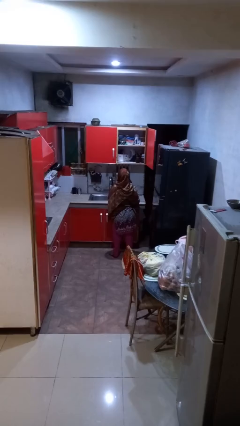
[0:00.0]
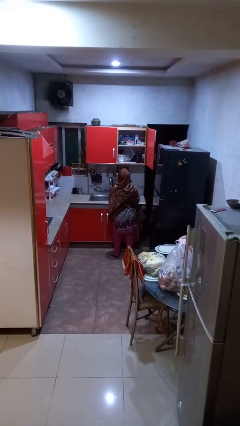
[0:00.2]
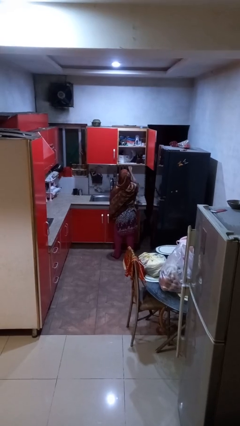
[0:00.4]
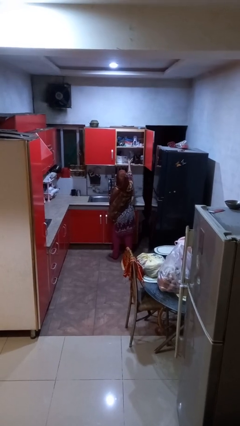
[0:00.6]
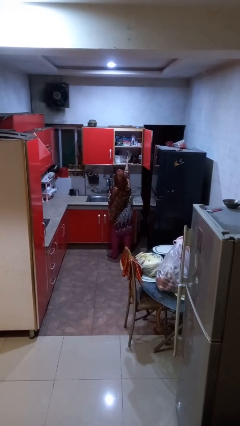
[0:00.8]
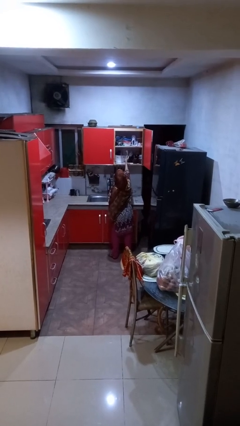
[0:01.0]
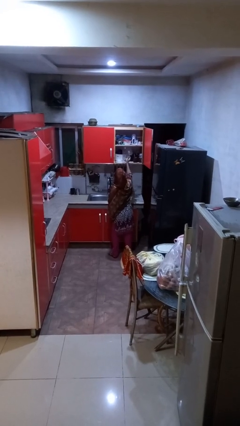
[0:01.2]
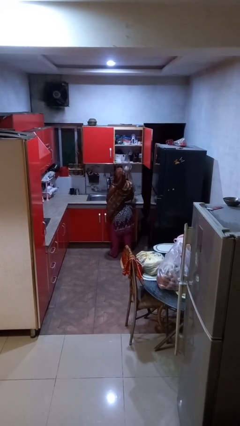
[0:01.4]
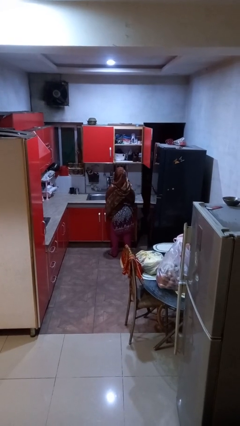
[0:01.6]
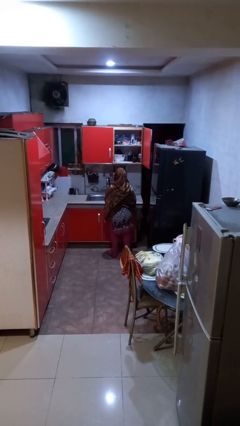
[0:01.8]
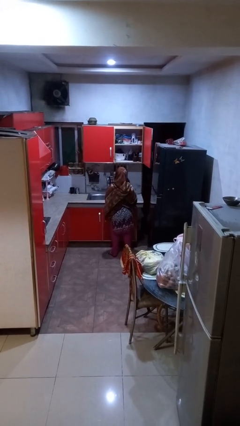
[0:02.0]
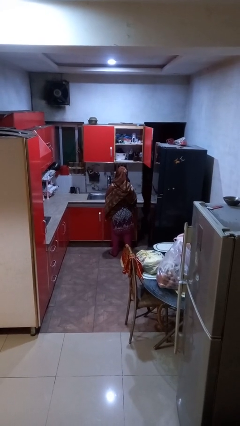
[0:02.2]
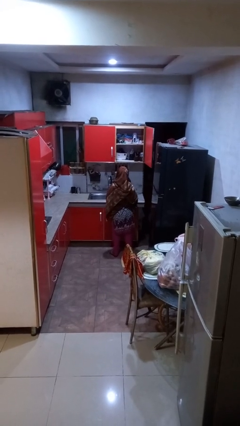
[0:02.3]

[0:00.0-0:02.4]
person takes object from cabinet

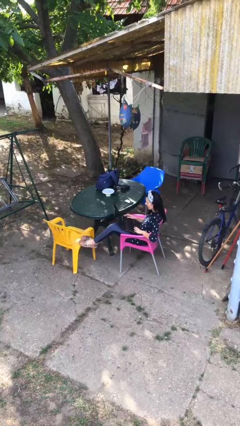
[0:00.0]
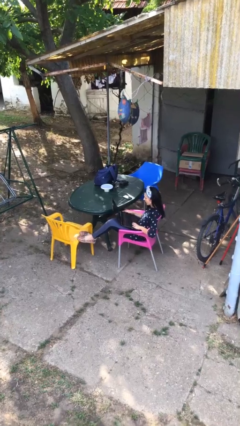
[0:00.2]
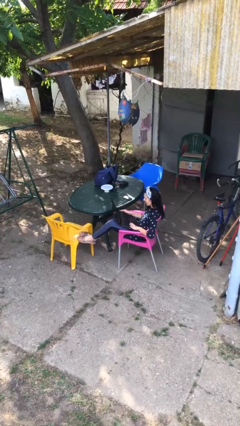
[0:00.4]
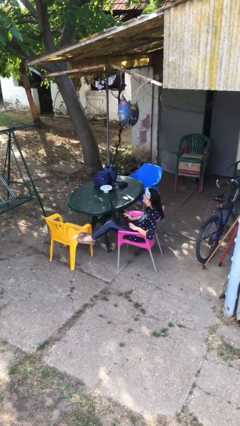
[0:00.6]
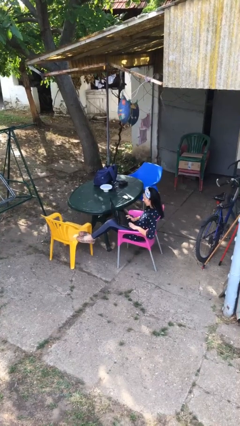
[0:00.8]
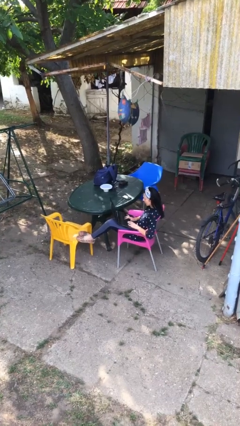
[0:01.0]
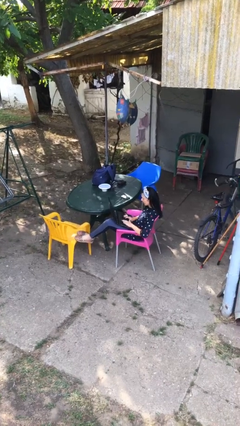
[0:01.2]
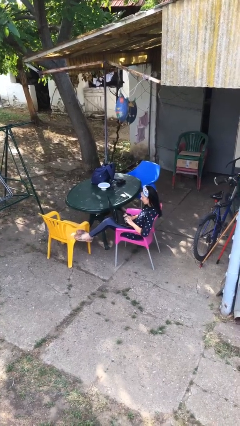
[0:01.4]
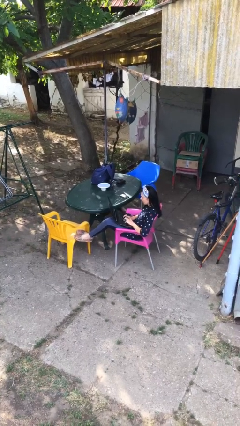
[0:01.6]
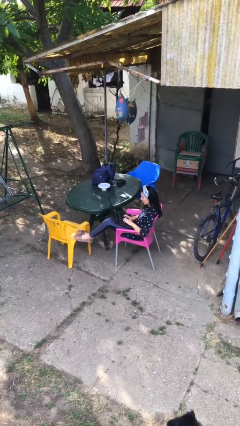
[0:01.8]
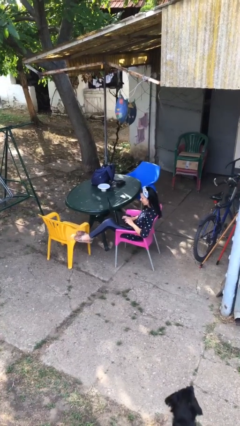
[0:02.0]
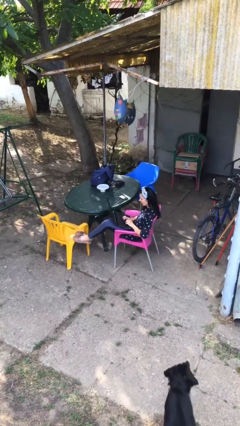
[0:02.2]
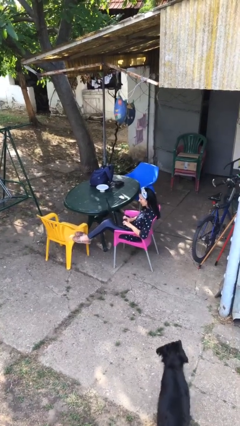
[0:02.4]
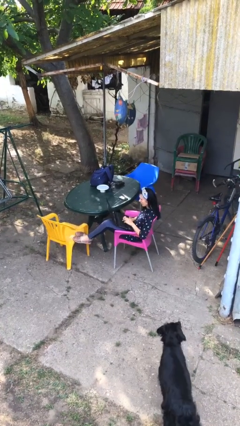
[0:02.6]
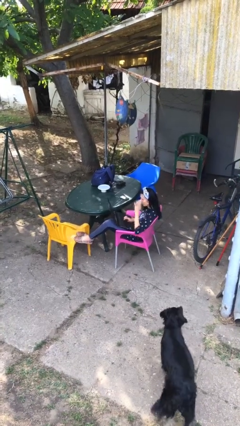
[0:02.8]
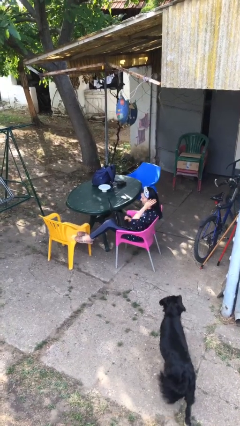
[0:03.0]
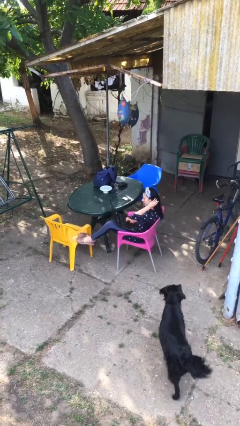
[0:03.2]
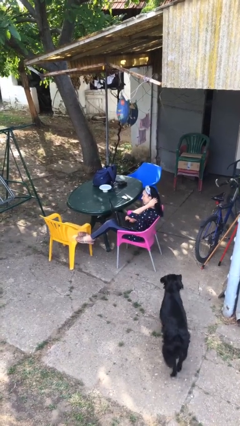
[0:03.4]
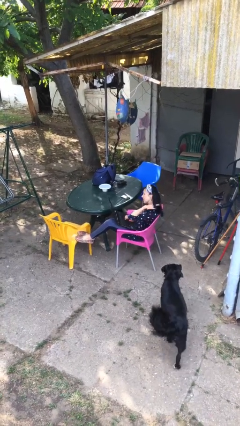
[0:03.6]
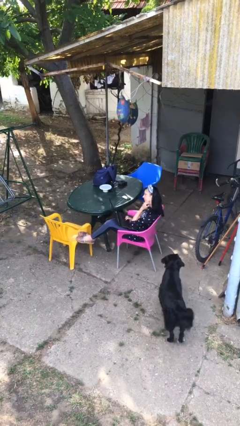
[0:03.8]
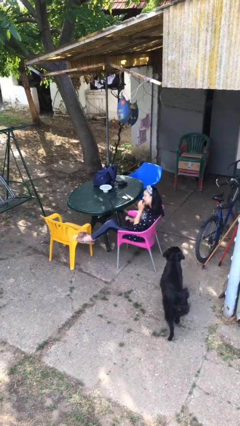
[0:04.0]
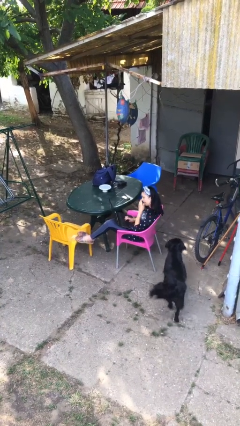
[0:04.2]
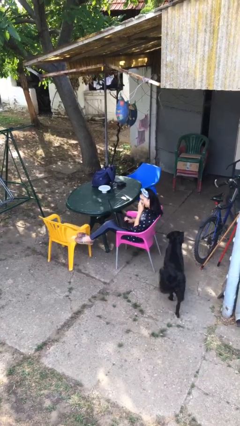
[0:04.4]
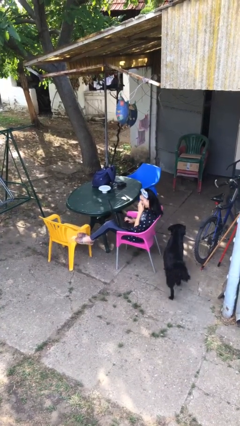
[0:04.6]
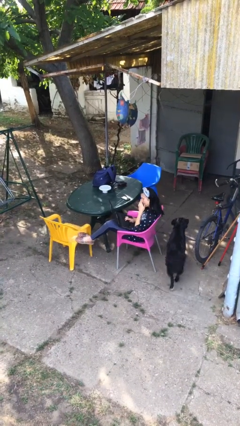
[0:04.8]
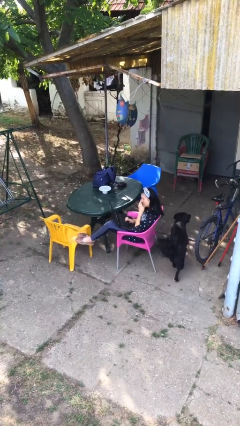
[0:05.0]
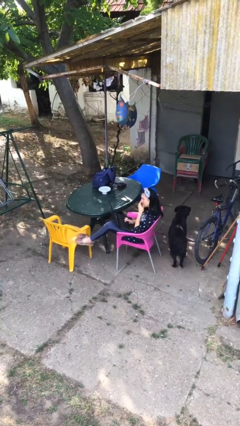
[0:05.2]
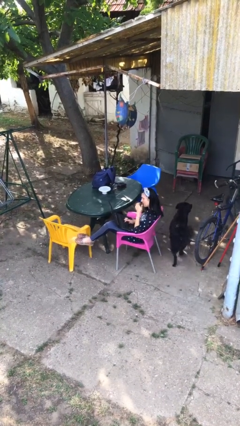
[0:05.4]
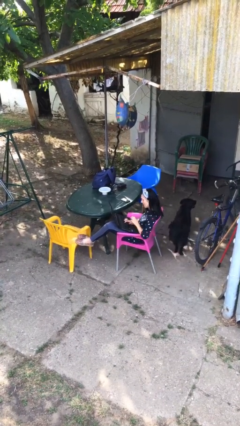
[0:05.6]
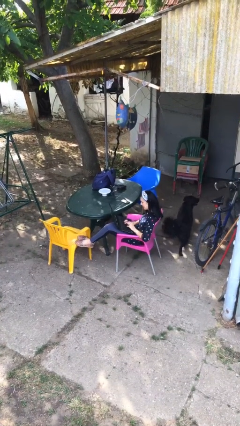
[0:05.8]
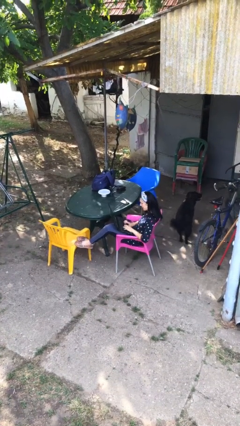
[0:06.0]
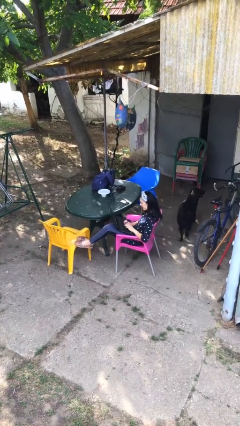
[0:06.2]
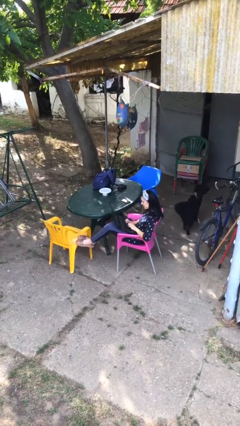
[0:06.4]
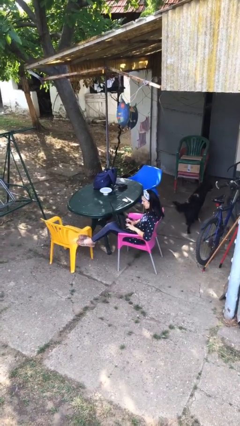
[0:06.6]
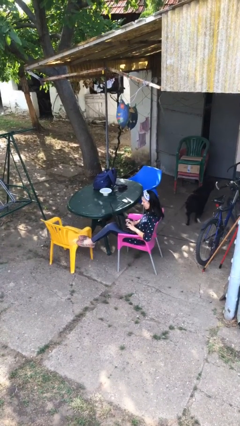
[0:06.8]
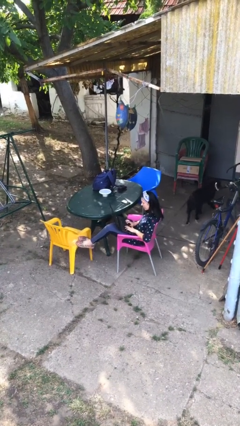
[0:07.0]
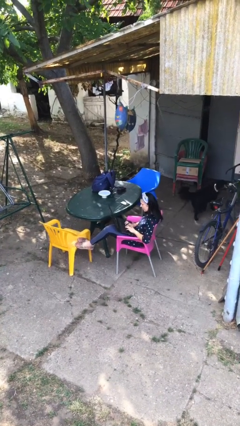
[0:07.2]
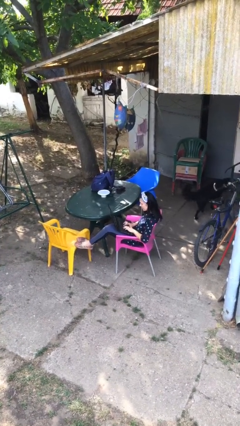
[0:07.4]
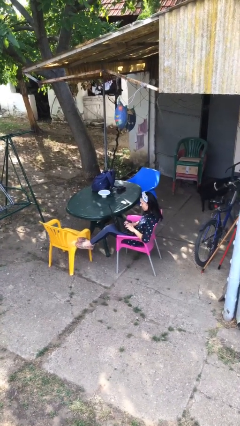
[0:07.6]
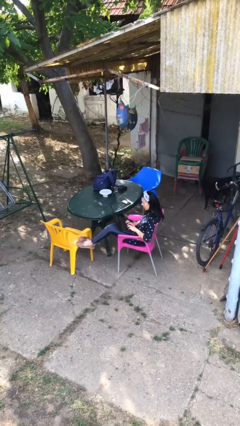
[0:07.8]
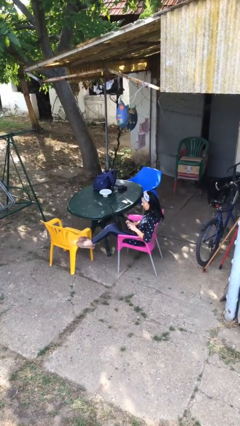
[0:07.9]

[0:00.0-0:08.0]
person interacts with laptop

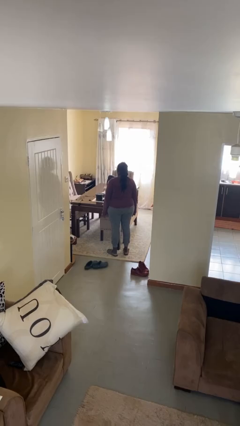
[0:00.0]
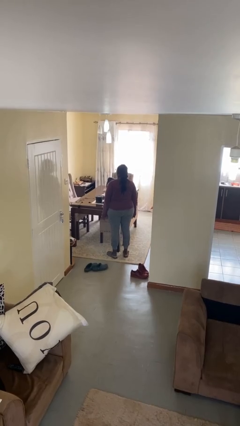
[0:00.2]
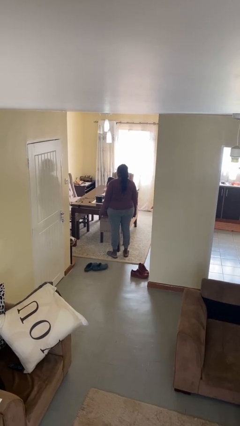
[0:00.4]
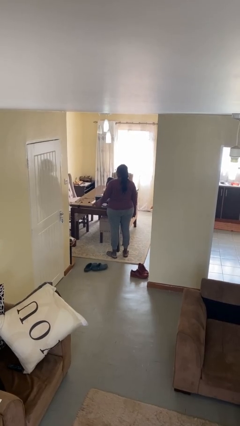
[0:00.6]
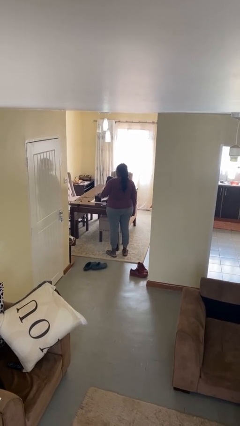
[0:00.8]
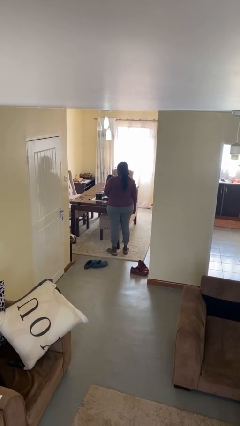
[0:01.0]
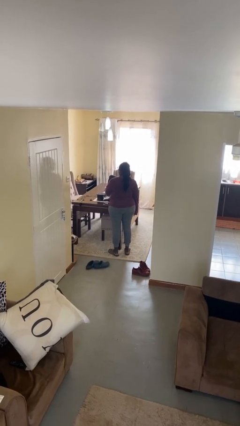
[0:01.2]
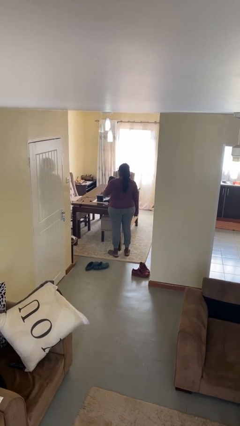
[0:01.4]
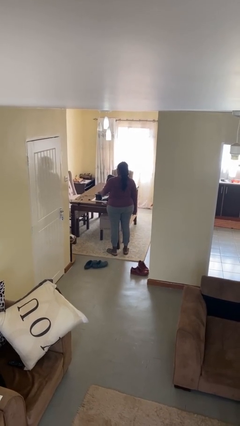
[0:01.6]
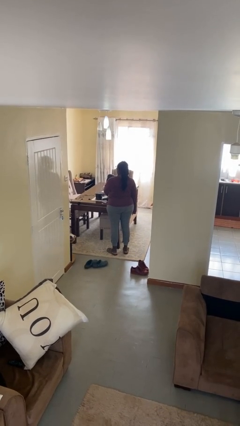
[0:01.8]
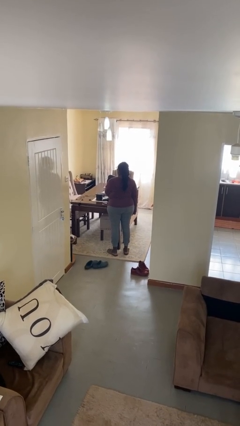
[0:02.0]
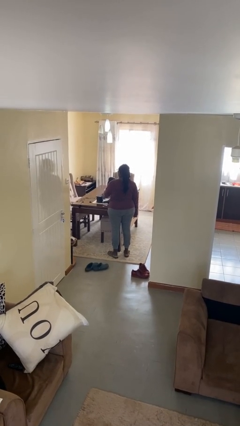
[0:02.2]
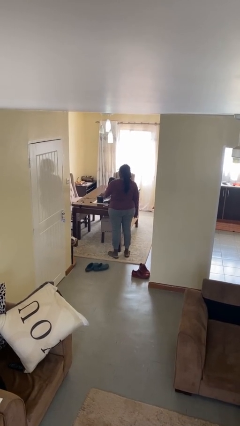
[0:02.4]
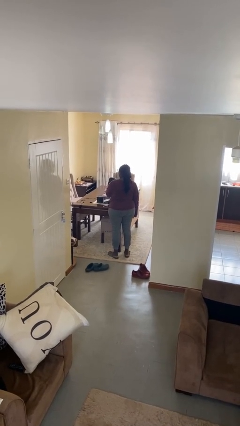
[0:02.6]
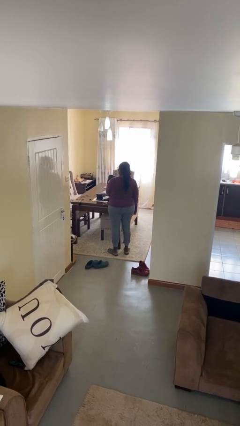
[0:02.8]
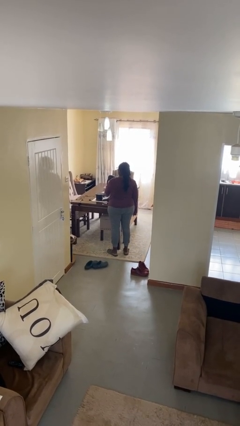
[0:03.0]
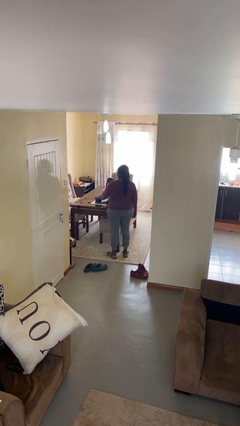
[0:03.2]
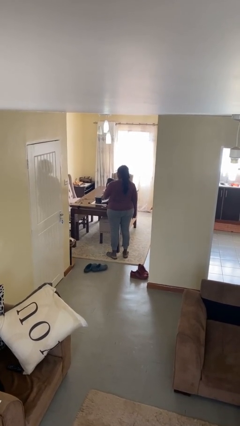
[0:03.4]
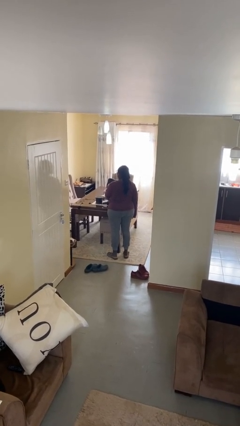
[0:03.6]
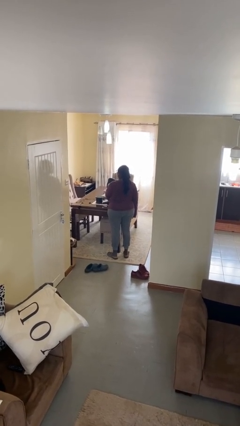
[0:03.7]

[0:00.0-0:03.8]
person waves hand over object

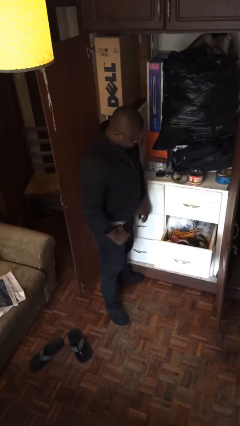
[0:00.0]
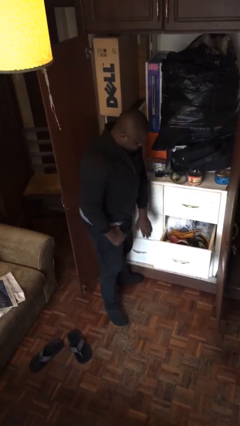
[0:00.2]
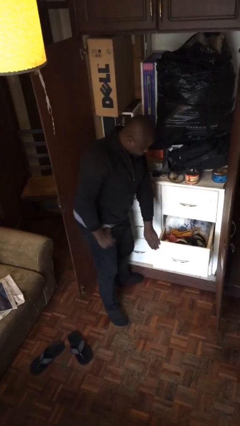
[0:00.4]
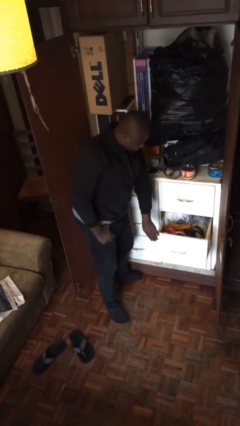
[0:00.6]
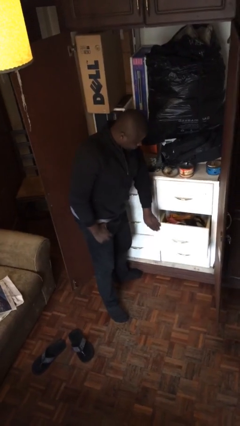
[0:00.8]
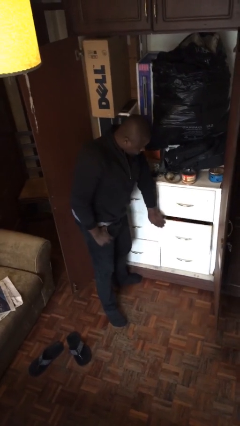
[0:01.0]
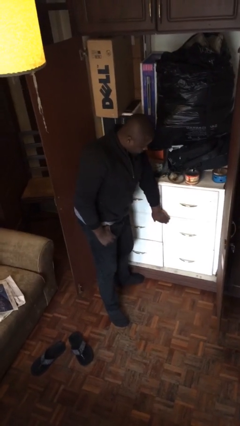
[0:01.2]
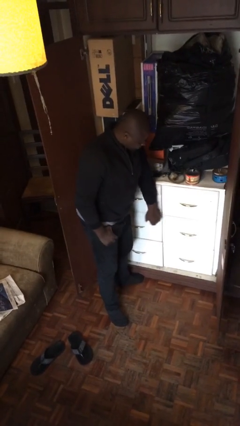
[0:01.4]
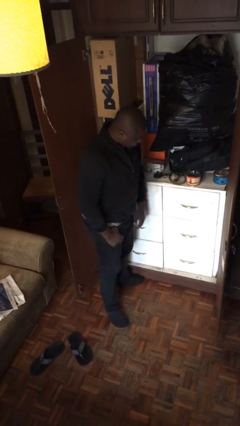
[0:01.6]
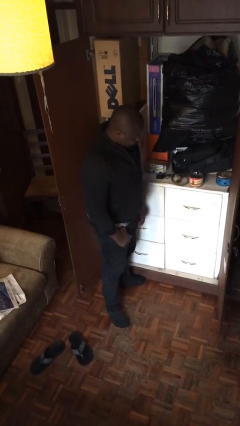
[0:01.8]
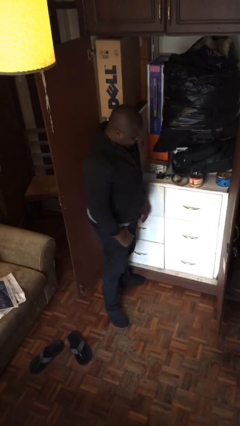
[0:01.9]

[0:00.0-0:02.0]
person closes dresser drawer

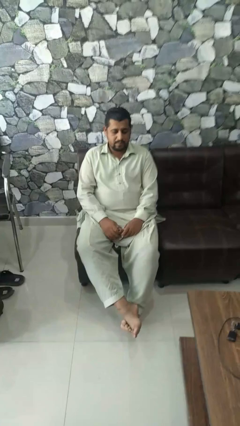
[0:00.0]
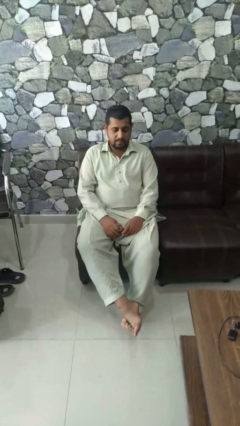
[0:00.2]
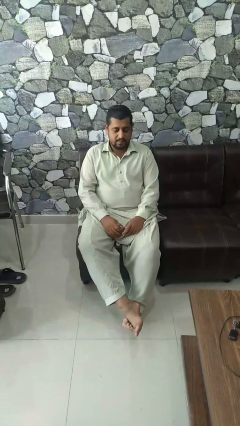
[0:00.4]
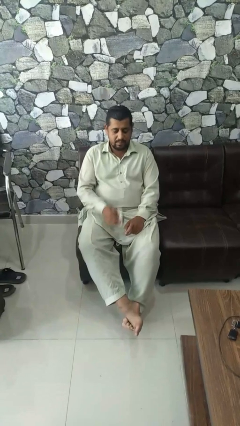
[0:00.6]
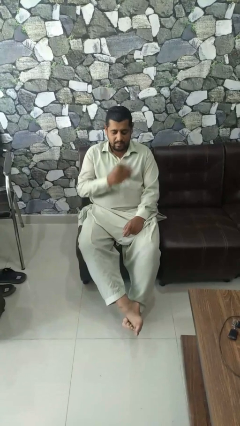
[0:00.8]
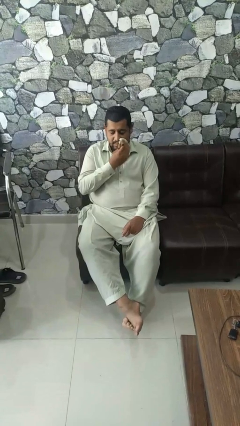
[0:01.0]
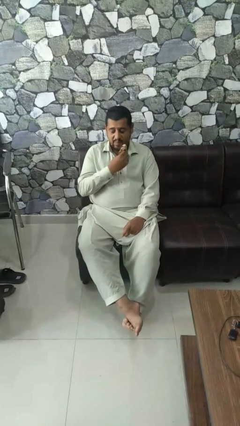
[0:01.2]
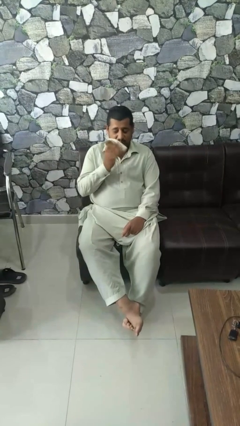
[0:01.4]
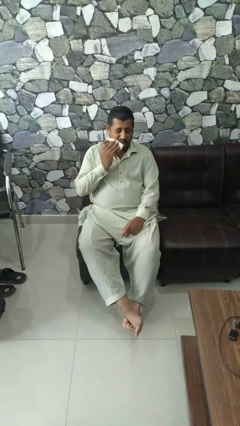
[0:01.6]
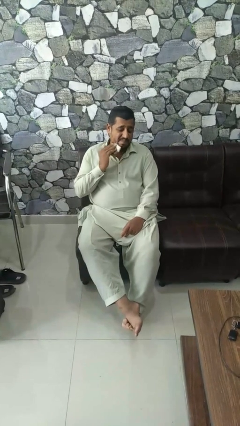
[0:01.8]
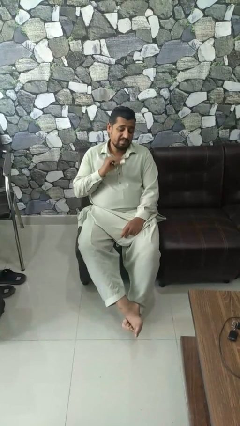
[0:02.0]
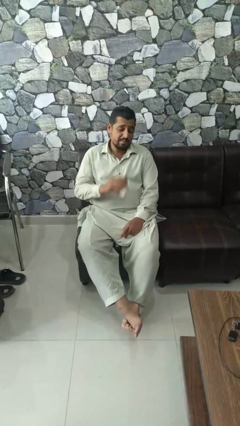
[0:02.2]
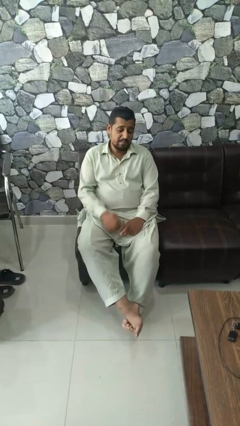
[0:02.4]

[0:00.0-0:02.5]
person wipes mouth with napkin
